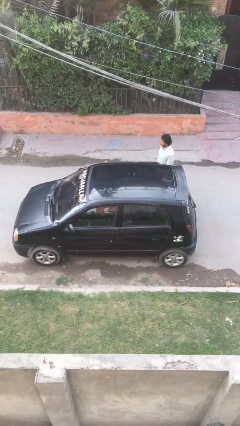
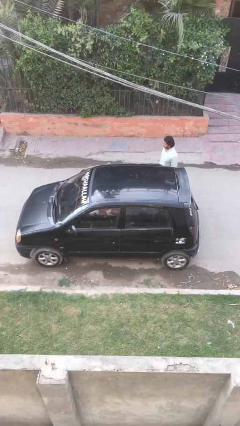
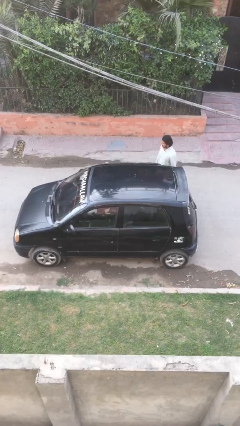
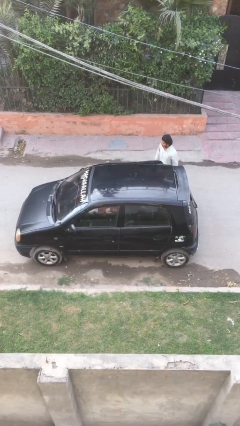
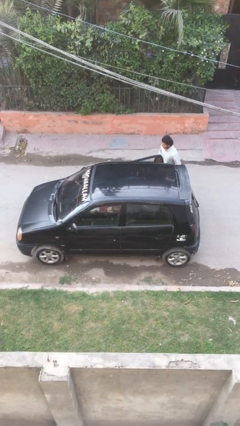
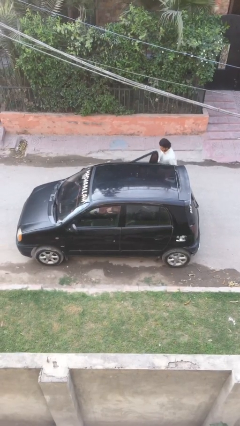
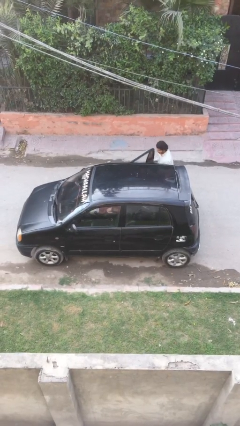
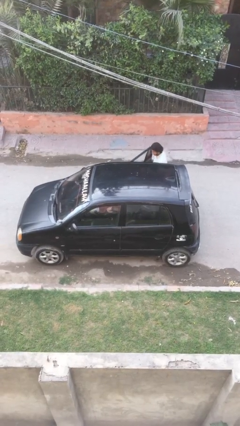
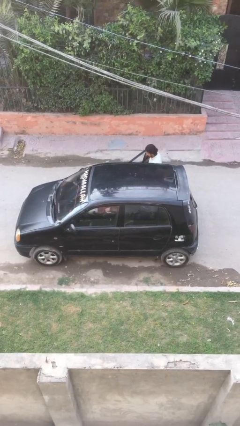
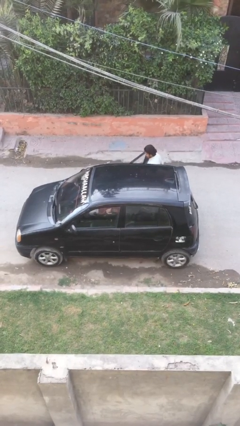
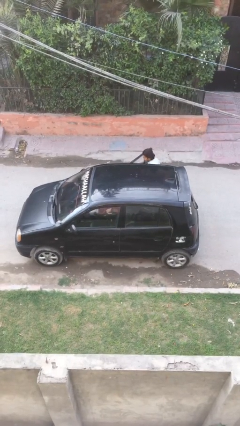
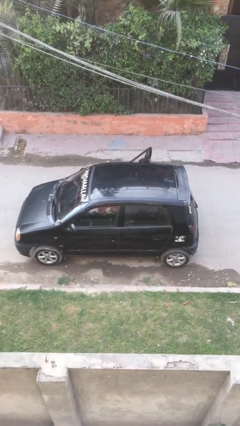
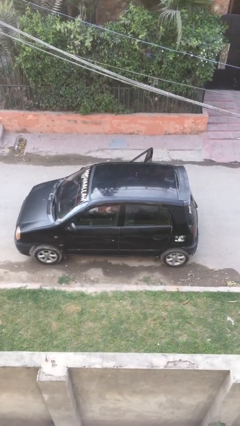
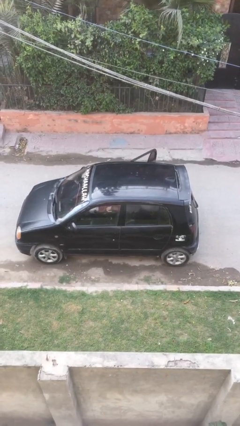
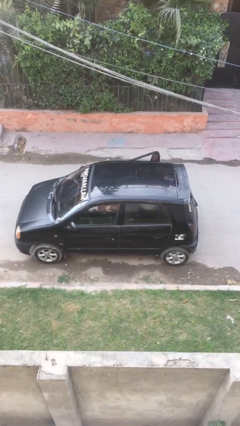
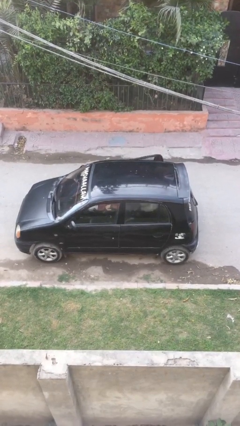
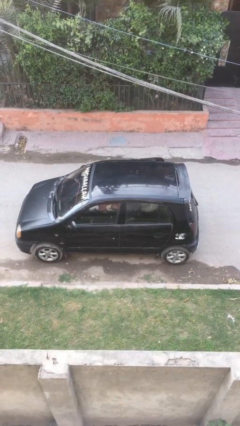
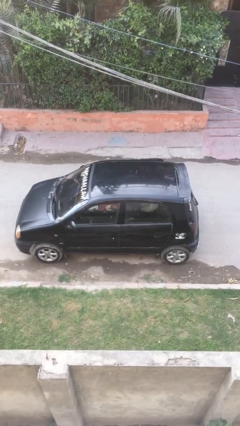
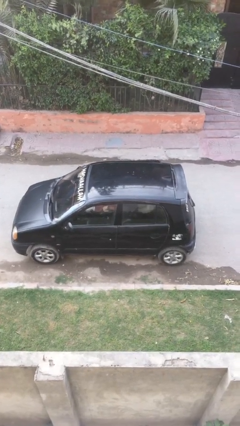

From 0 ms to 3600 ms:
car picks up person

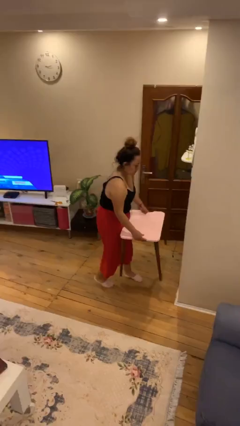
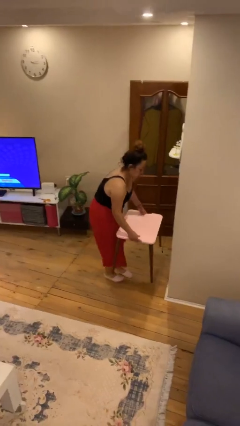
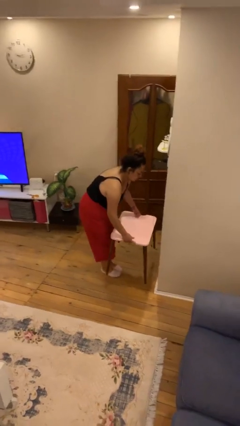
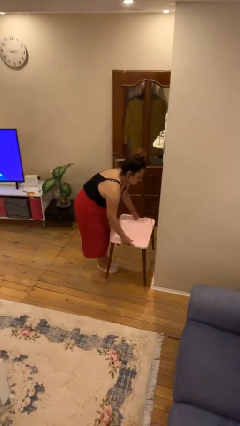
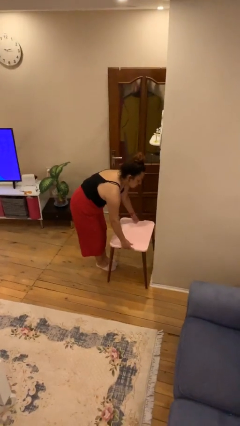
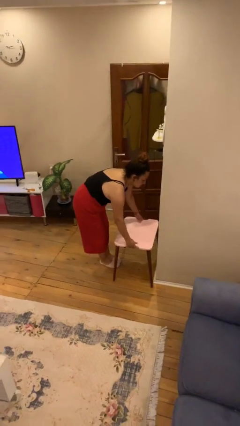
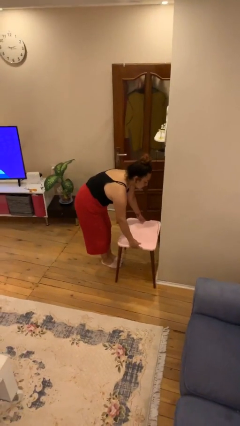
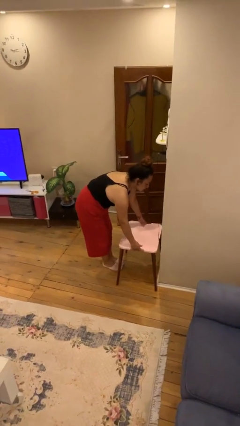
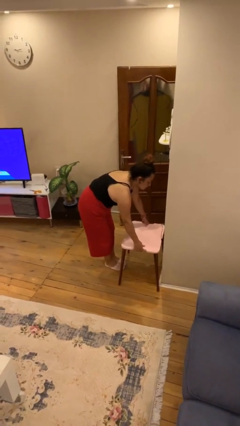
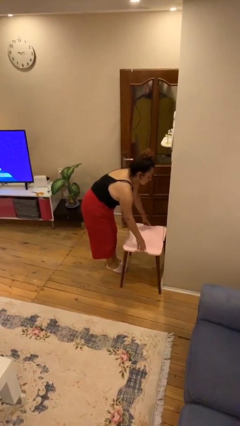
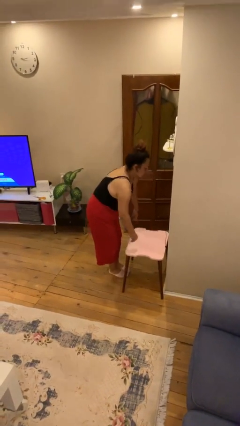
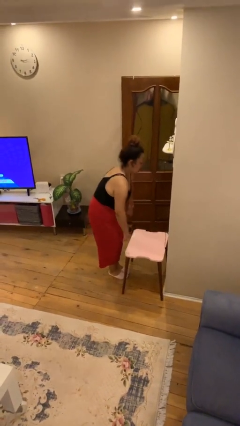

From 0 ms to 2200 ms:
person puts down object on floor

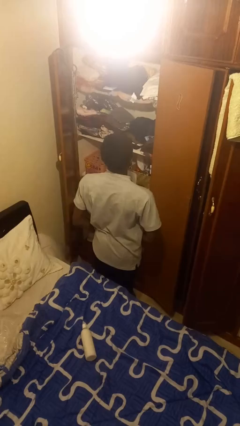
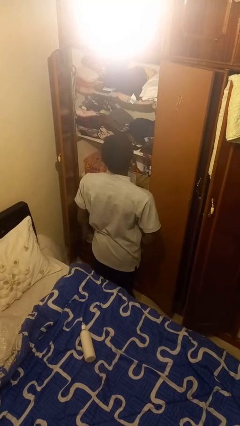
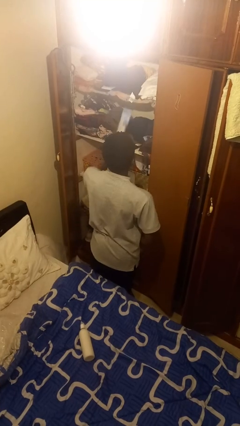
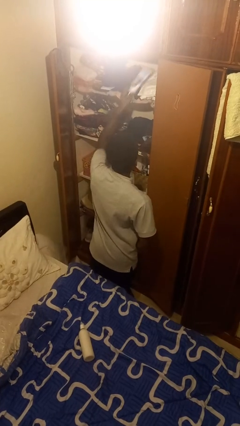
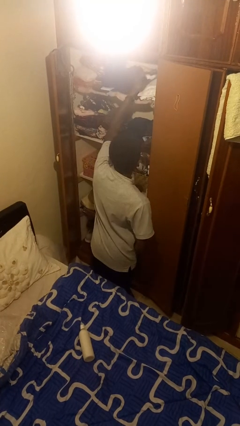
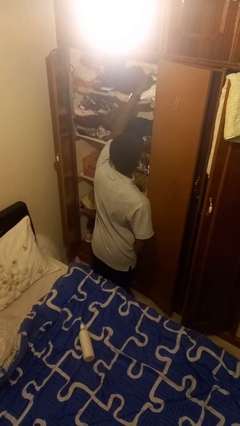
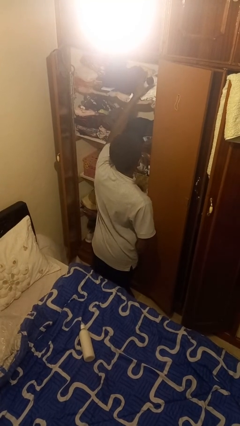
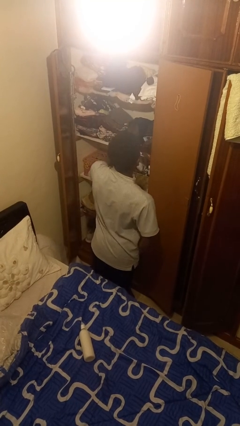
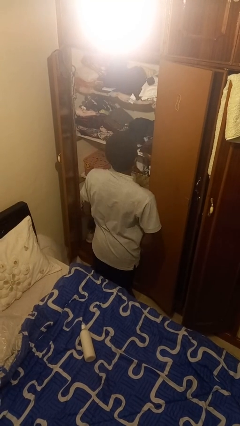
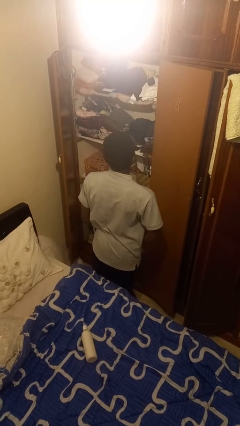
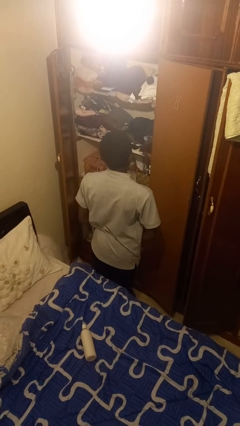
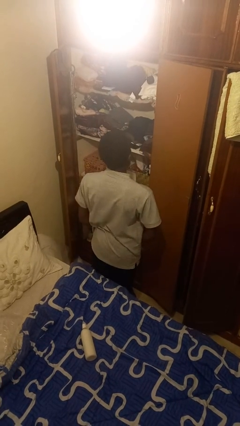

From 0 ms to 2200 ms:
person puts down object on shelf

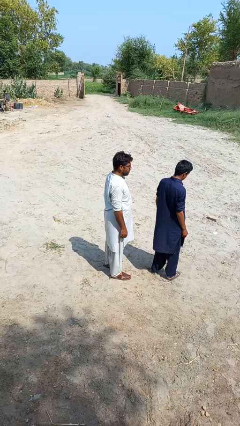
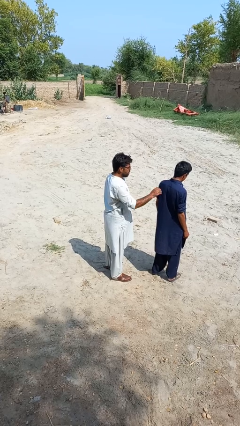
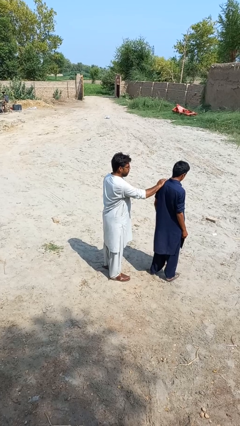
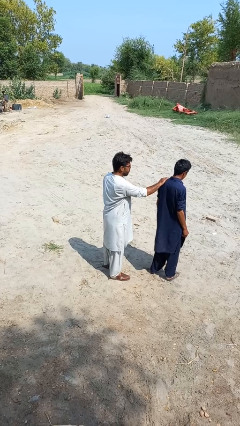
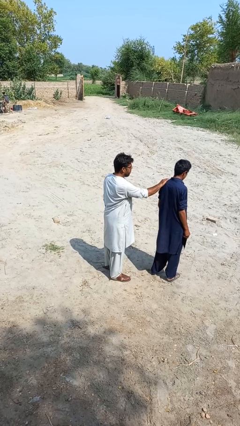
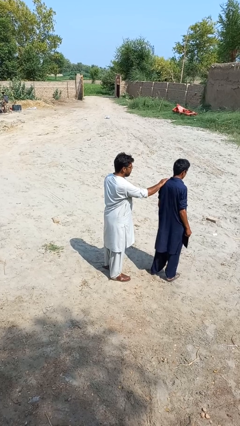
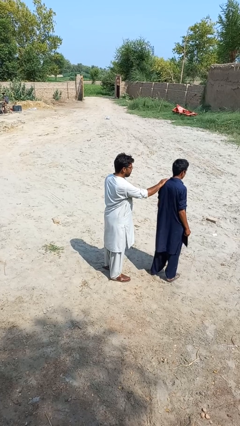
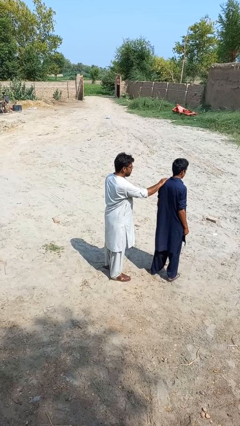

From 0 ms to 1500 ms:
person grabs person by shoulder

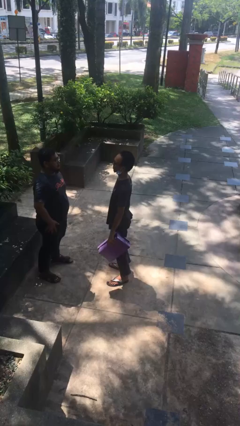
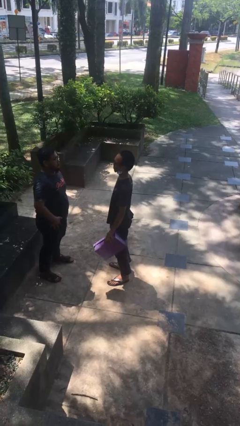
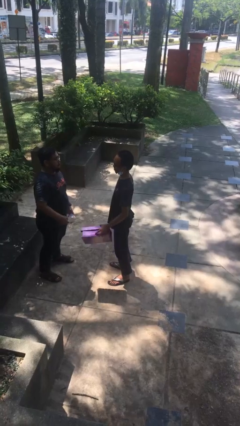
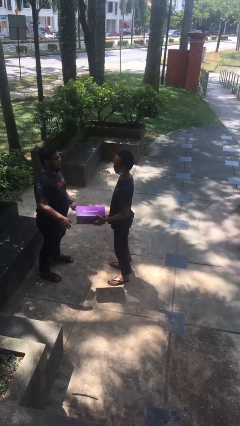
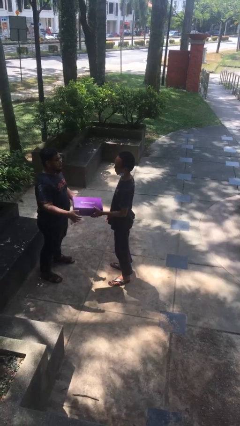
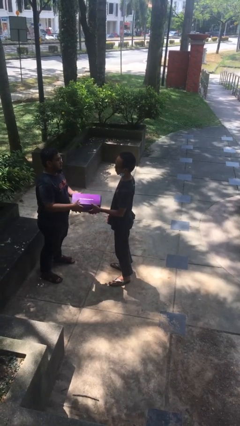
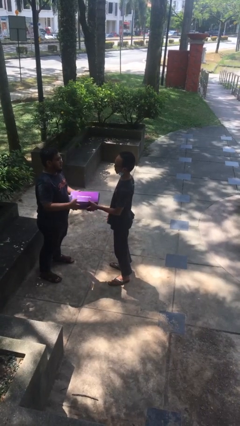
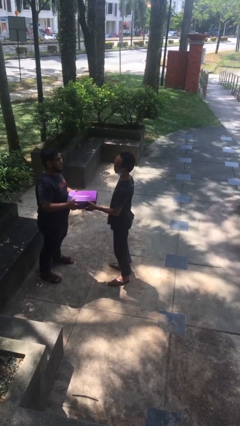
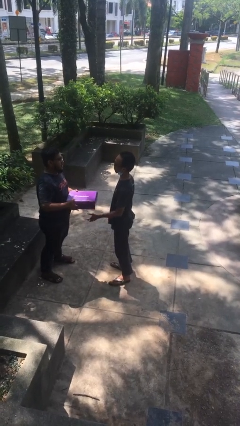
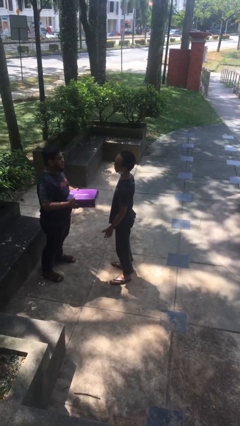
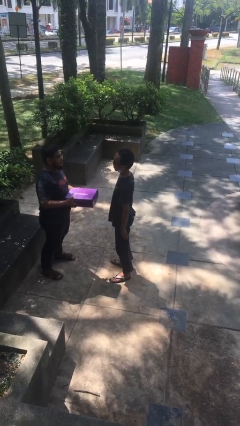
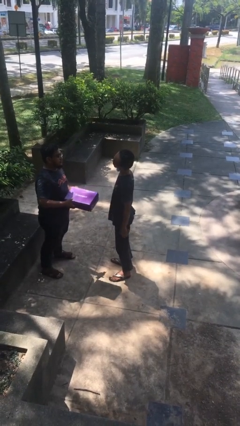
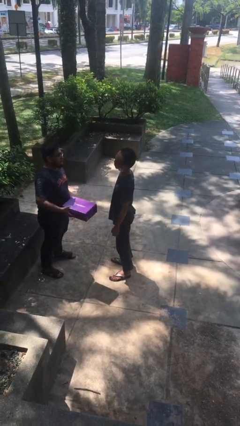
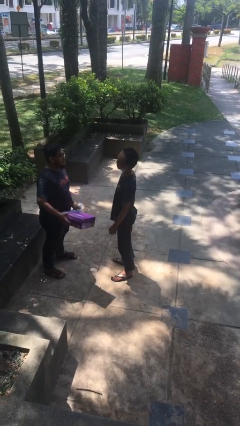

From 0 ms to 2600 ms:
person transfers object to person

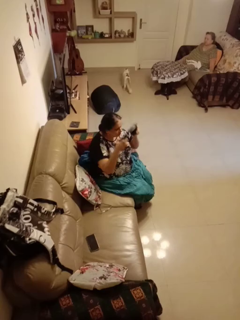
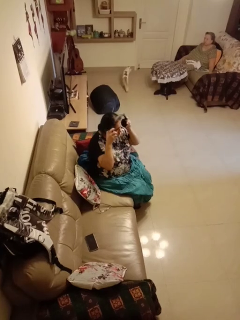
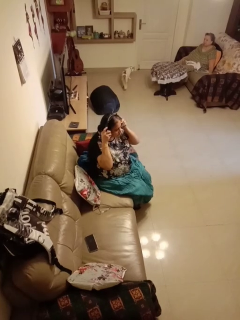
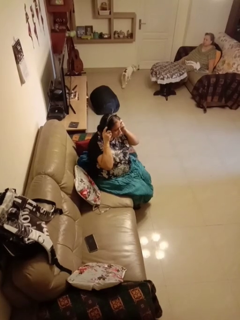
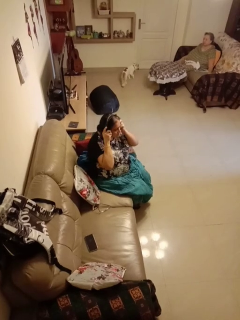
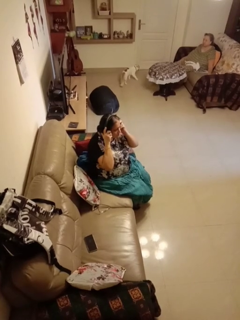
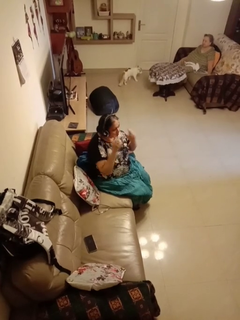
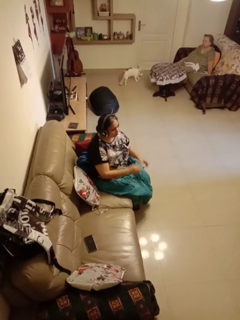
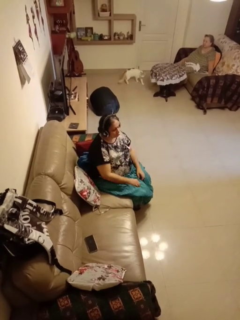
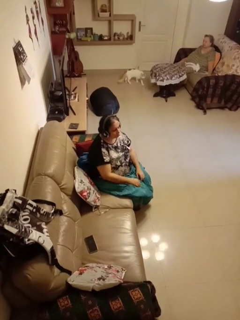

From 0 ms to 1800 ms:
person puts on headphones

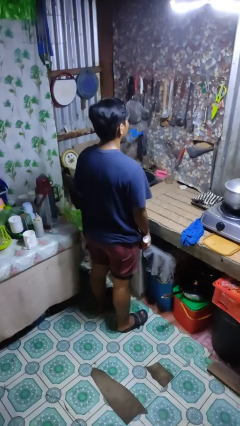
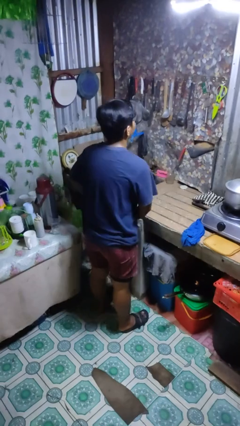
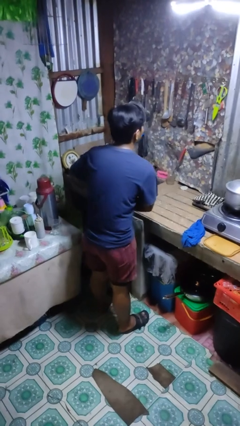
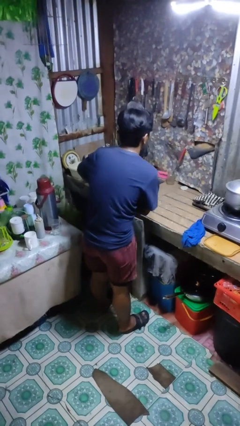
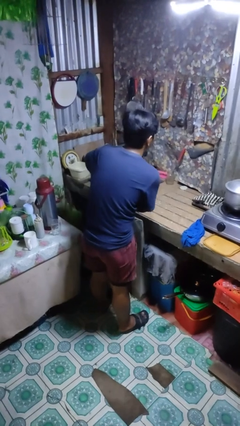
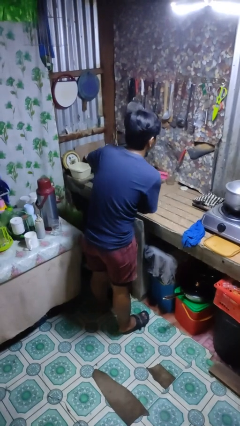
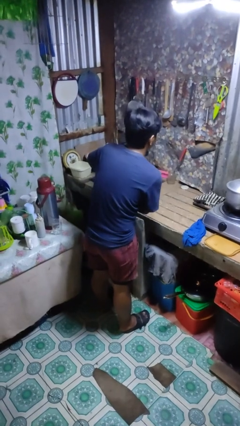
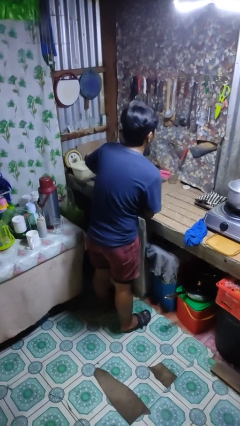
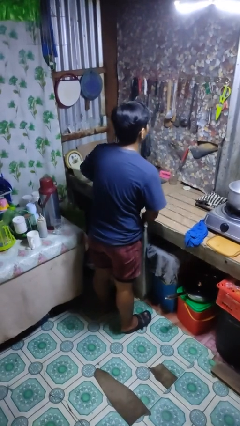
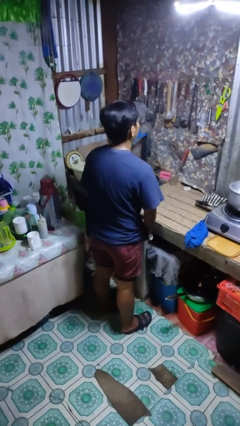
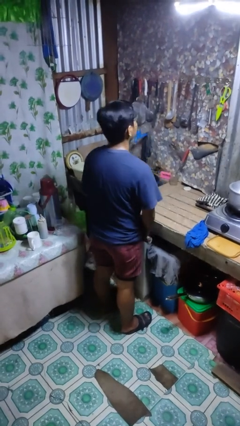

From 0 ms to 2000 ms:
person applies deodorant

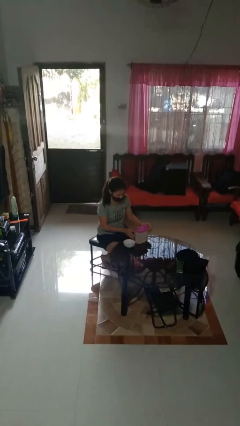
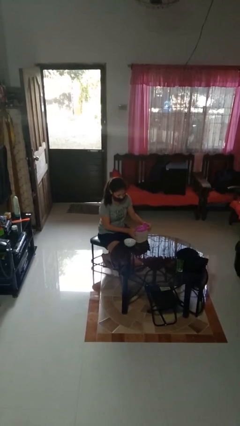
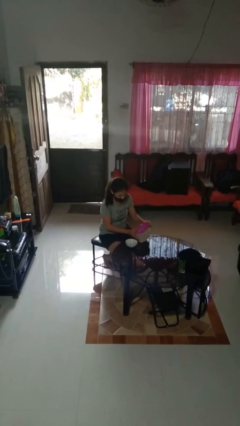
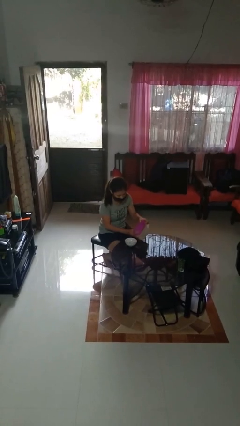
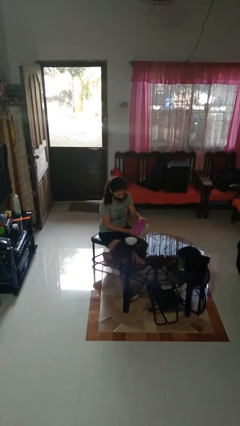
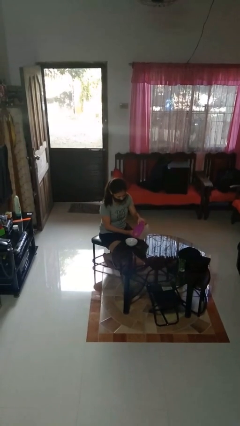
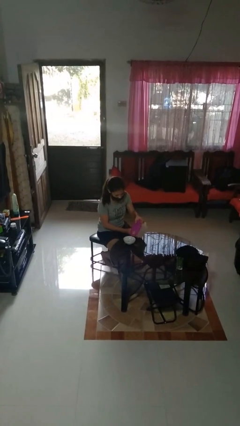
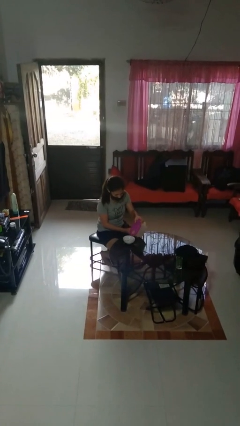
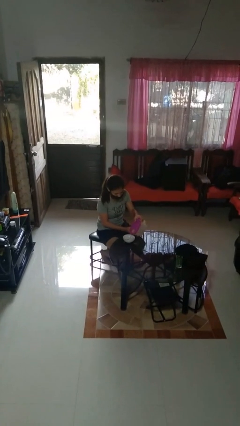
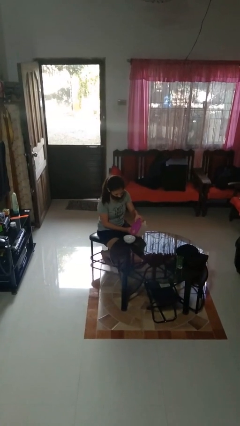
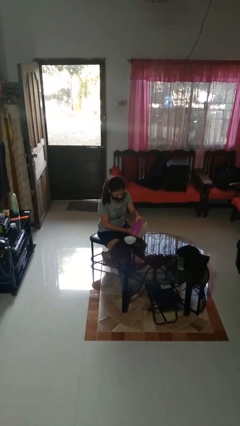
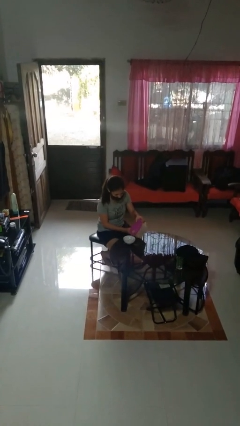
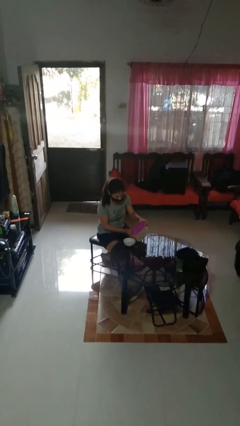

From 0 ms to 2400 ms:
person pours into bowl
